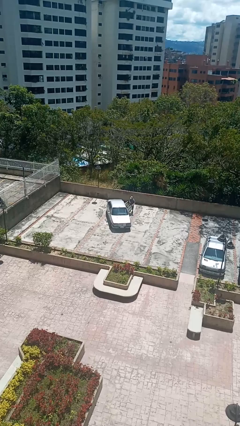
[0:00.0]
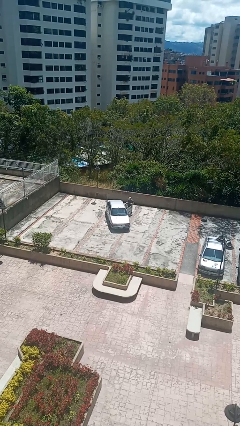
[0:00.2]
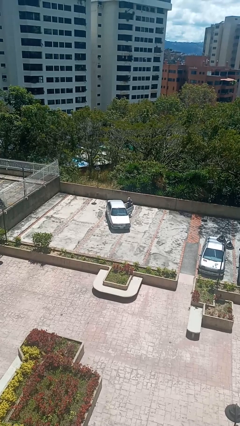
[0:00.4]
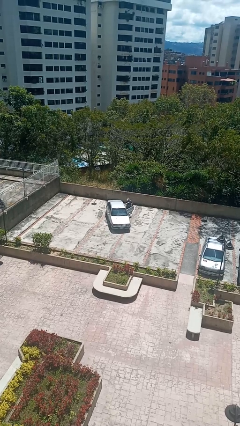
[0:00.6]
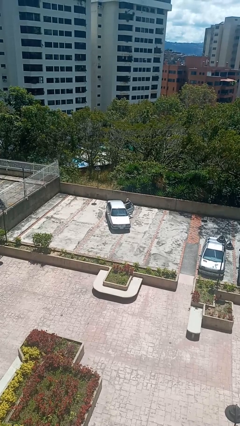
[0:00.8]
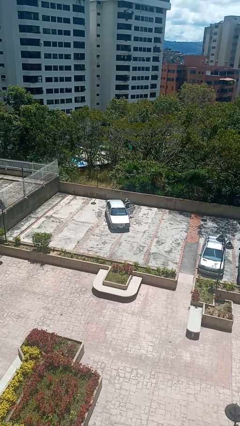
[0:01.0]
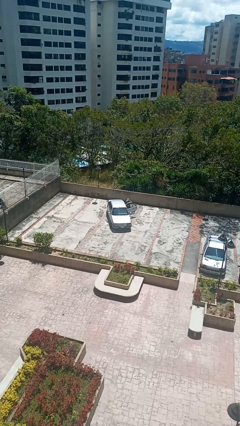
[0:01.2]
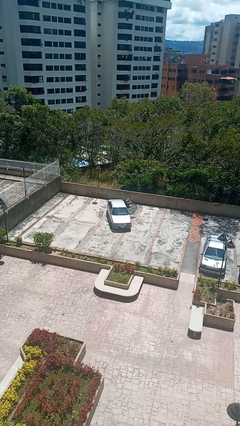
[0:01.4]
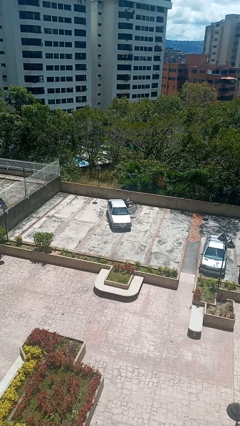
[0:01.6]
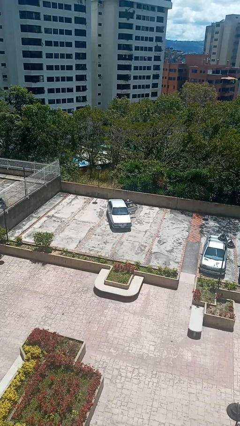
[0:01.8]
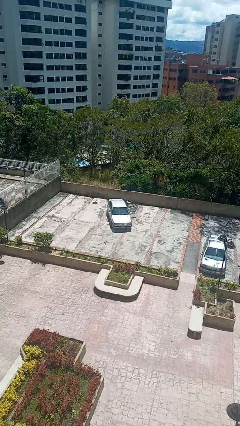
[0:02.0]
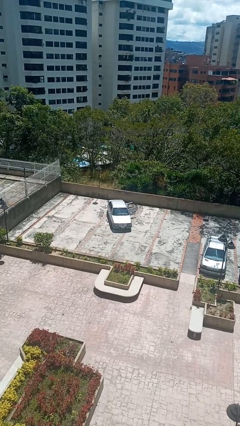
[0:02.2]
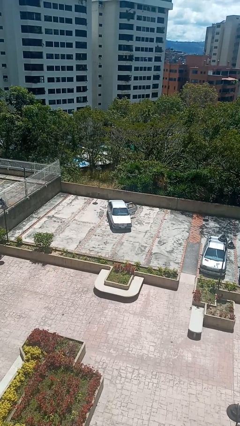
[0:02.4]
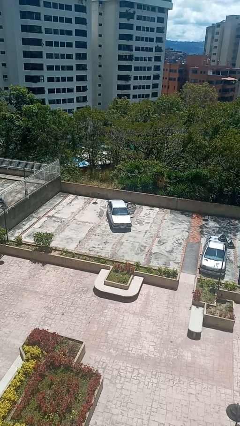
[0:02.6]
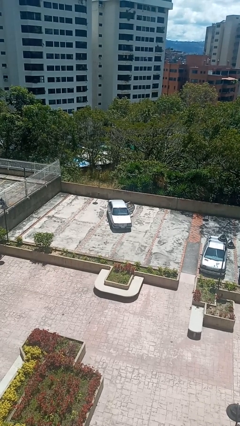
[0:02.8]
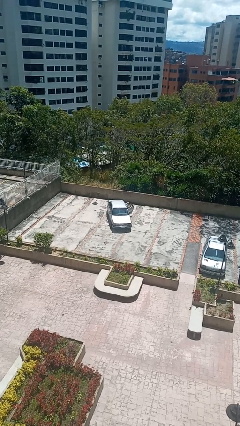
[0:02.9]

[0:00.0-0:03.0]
car picks up person

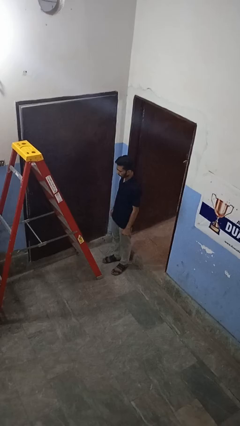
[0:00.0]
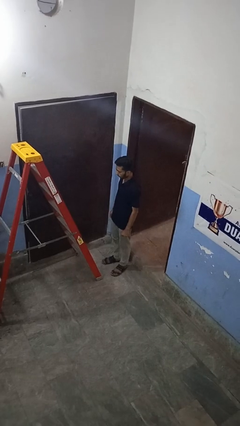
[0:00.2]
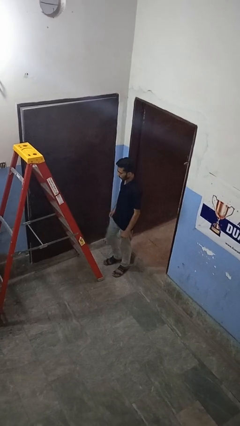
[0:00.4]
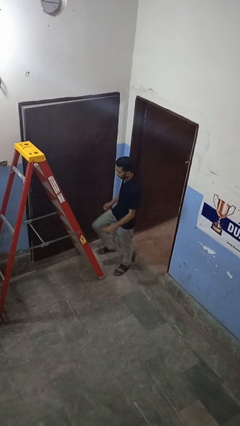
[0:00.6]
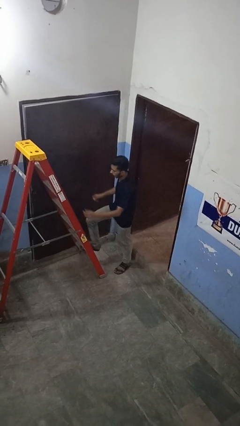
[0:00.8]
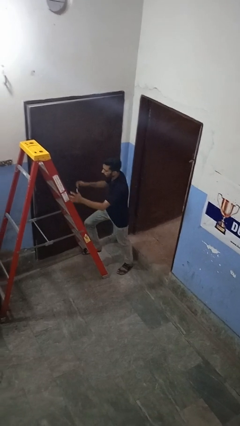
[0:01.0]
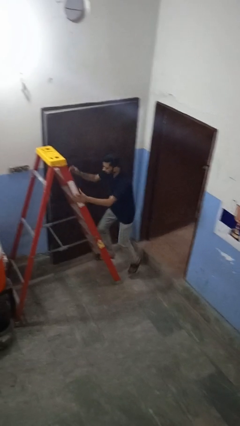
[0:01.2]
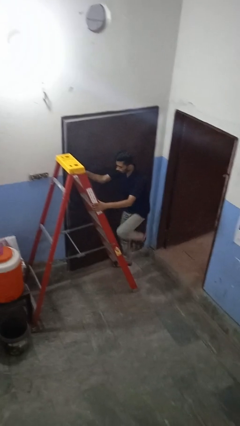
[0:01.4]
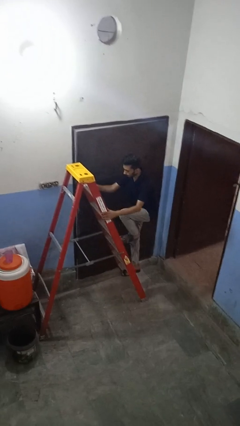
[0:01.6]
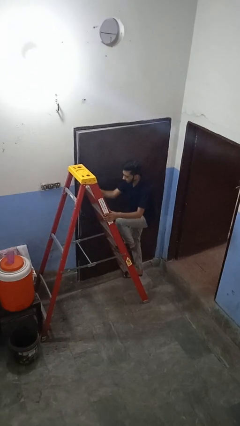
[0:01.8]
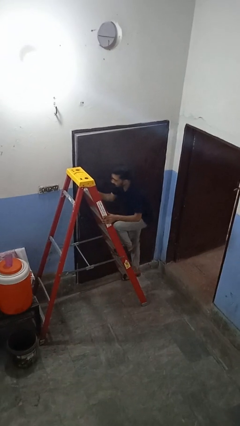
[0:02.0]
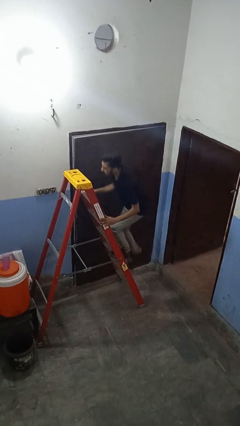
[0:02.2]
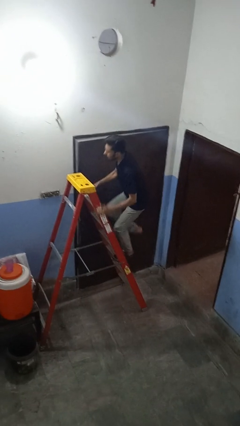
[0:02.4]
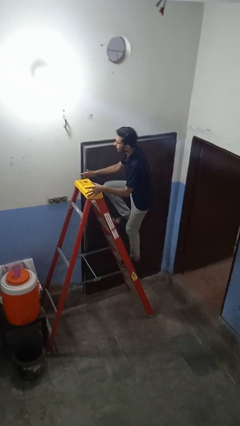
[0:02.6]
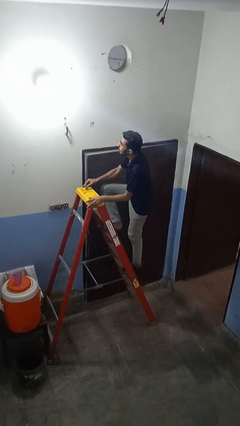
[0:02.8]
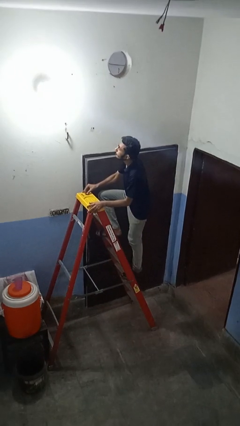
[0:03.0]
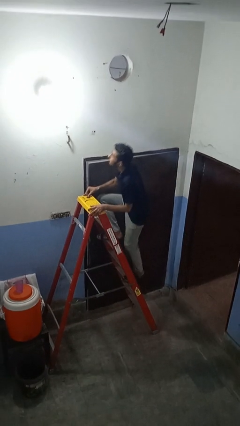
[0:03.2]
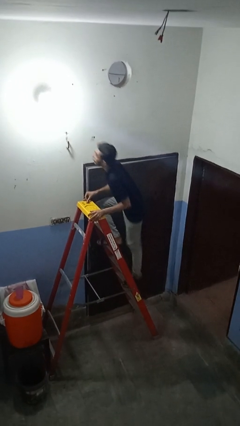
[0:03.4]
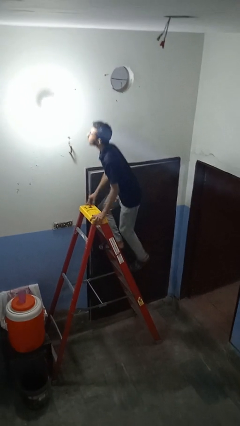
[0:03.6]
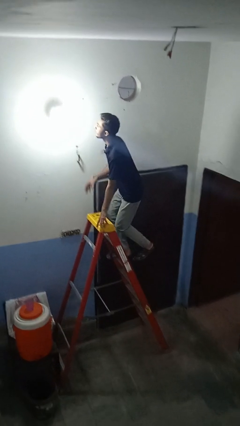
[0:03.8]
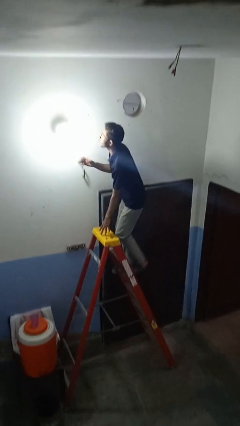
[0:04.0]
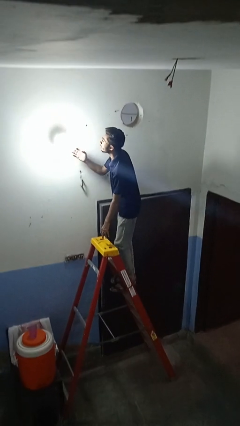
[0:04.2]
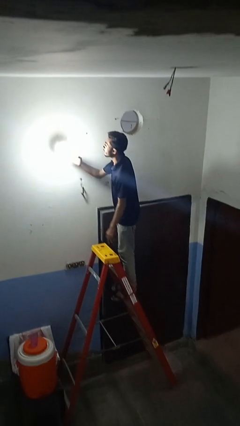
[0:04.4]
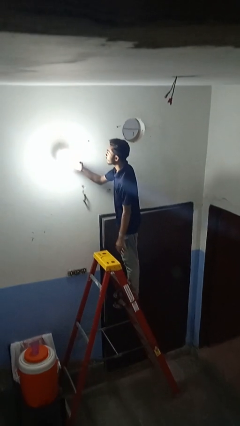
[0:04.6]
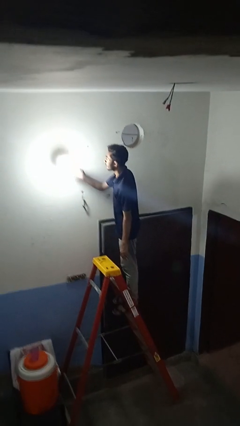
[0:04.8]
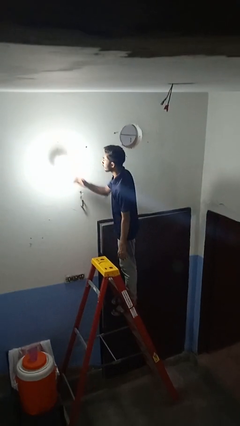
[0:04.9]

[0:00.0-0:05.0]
person climbs up ladder

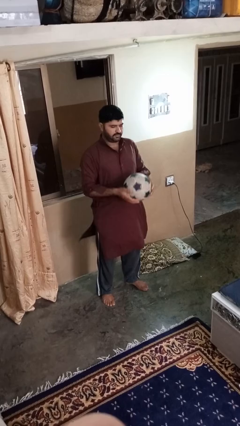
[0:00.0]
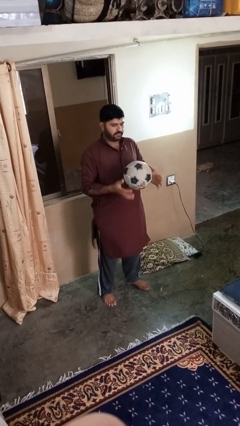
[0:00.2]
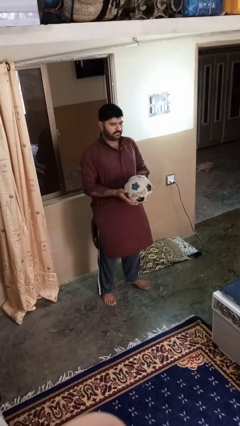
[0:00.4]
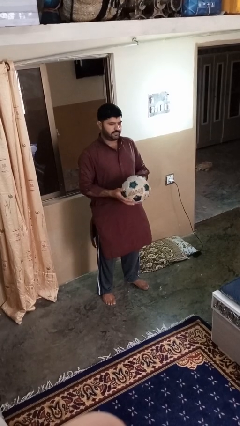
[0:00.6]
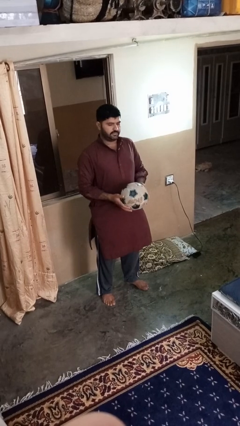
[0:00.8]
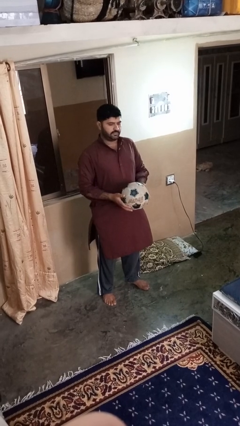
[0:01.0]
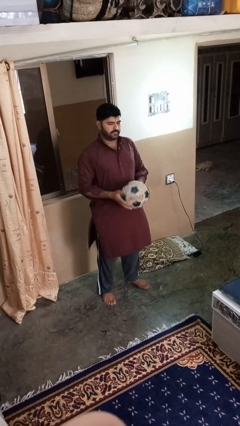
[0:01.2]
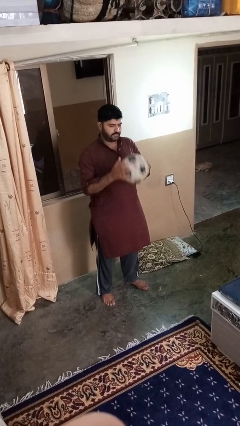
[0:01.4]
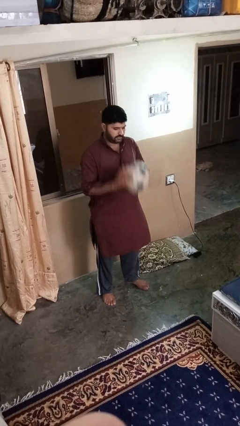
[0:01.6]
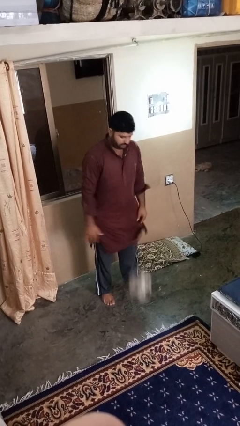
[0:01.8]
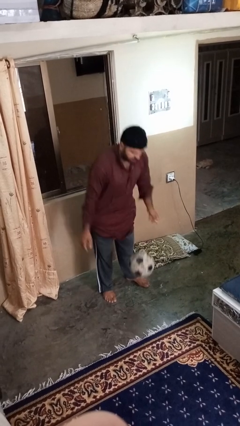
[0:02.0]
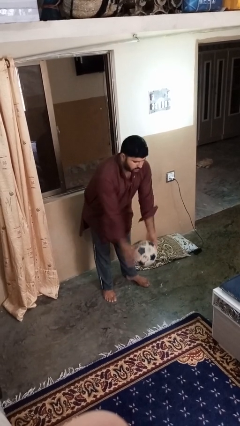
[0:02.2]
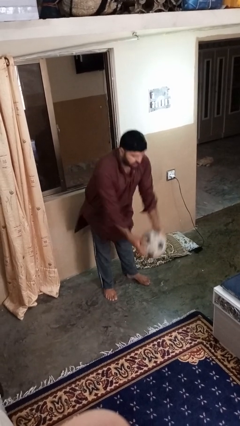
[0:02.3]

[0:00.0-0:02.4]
person bounces ball on floor

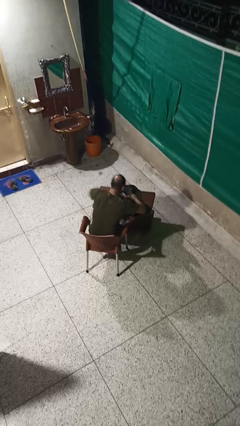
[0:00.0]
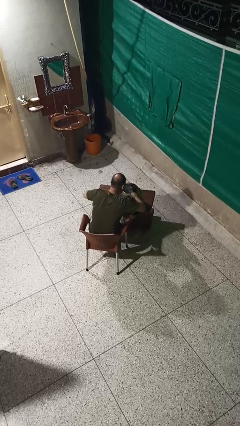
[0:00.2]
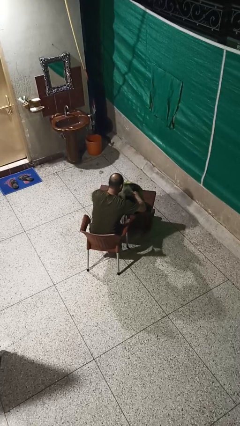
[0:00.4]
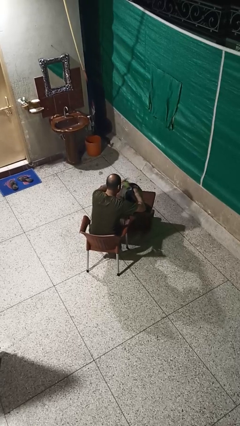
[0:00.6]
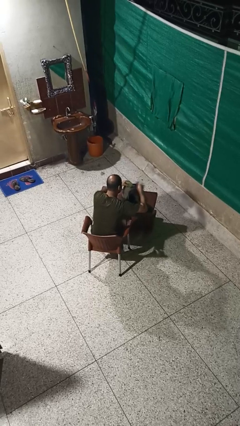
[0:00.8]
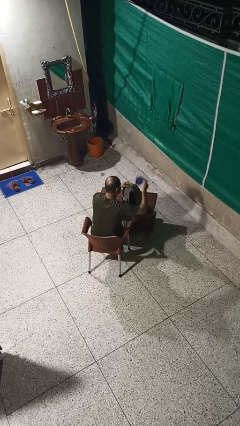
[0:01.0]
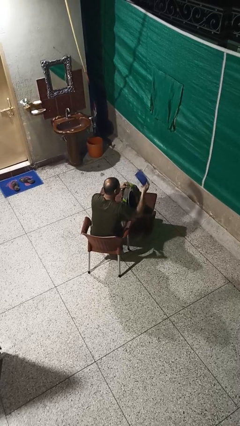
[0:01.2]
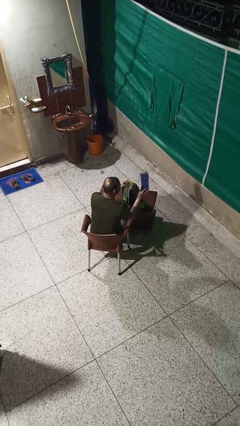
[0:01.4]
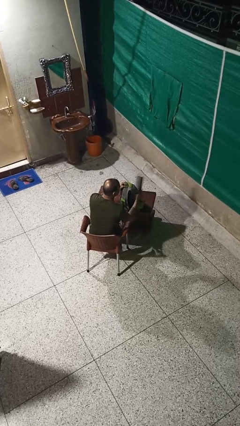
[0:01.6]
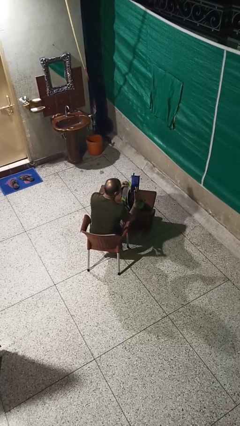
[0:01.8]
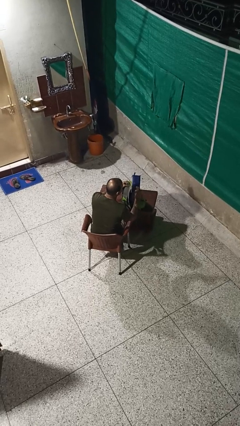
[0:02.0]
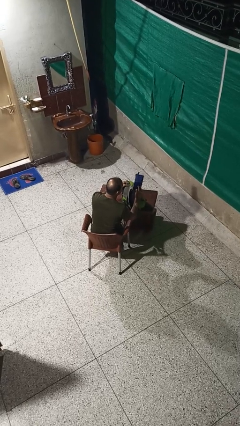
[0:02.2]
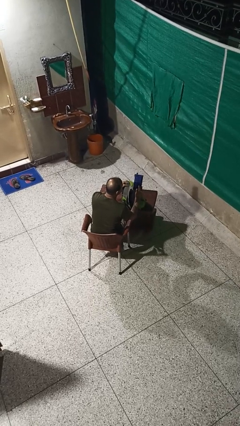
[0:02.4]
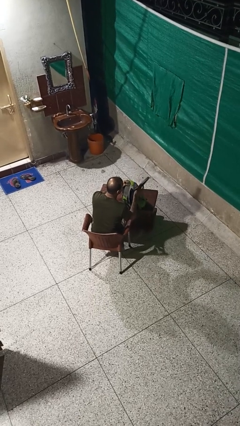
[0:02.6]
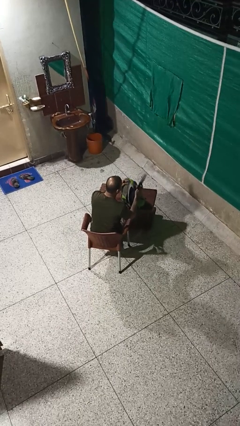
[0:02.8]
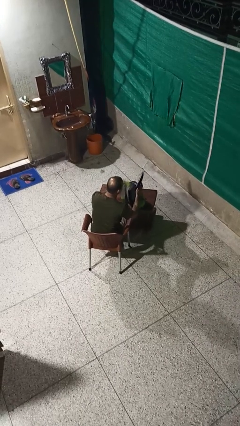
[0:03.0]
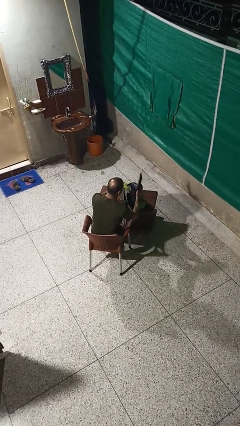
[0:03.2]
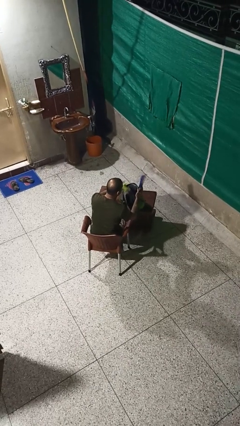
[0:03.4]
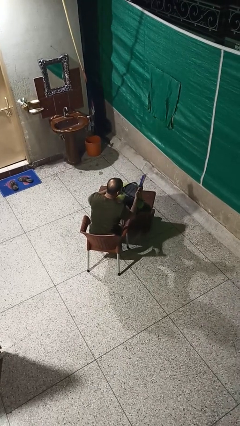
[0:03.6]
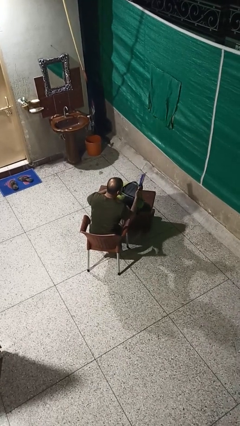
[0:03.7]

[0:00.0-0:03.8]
person takes object from backpack

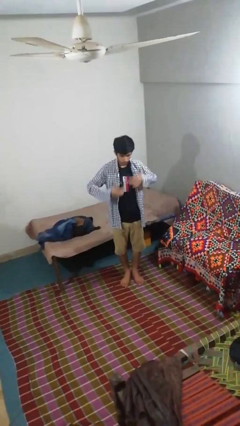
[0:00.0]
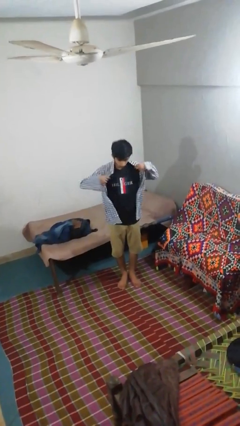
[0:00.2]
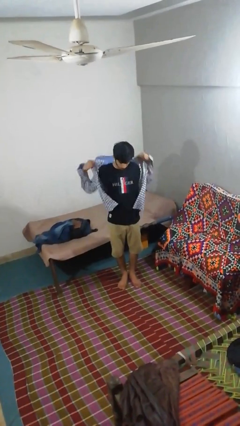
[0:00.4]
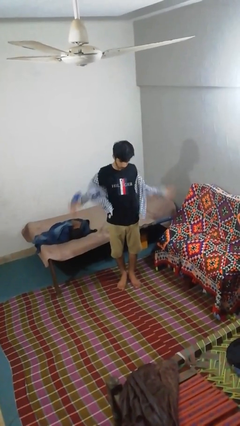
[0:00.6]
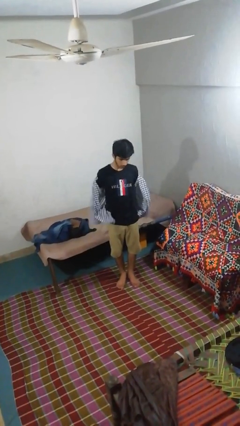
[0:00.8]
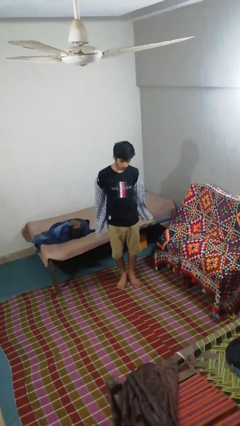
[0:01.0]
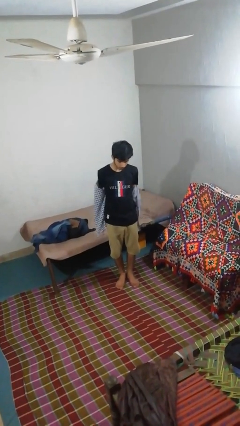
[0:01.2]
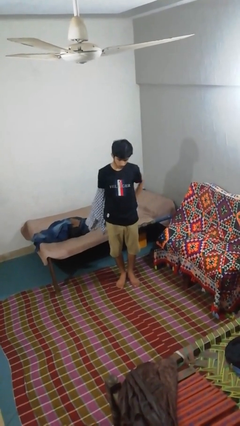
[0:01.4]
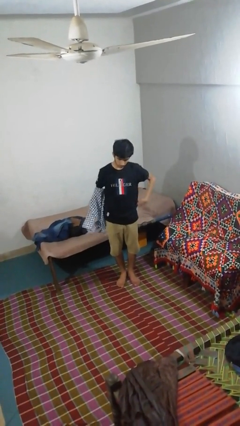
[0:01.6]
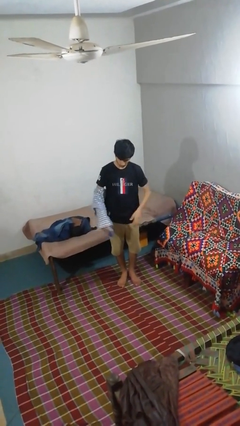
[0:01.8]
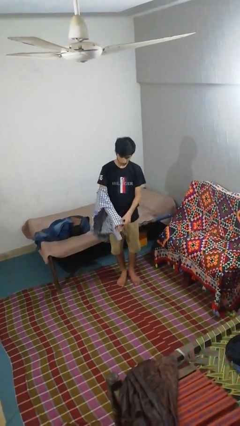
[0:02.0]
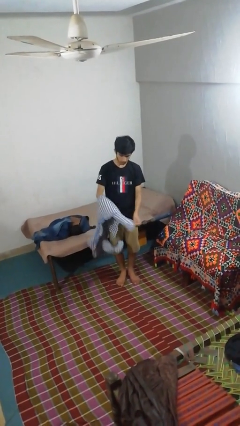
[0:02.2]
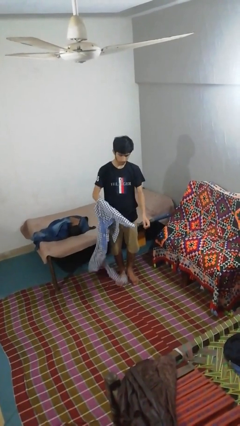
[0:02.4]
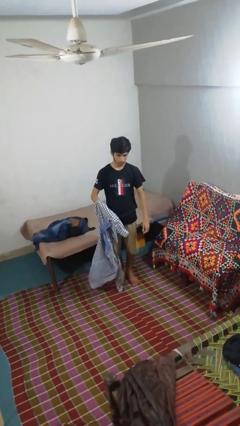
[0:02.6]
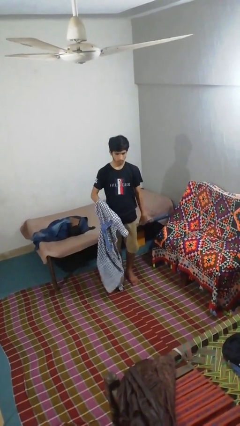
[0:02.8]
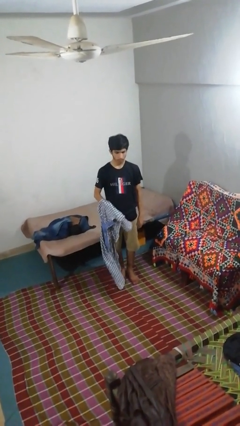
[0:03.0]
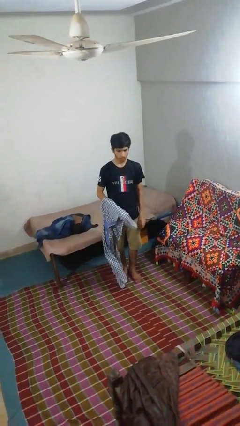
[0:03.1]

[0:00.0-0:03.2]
person takes off shirt
